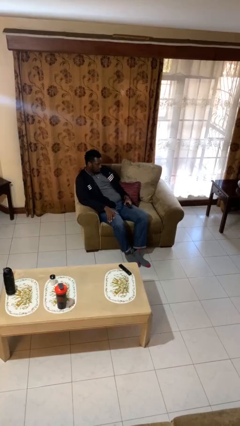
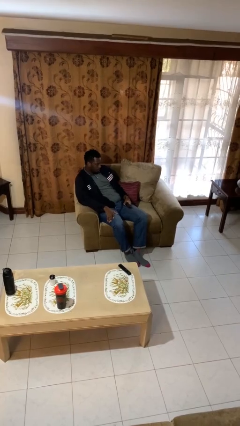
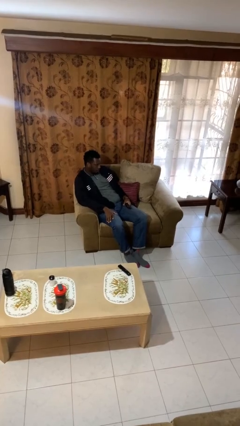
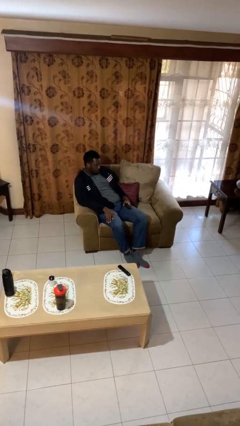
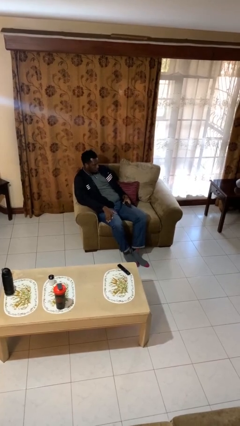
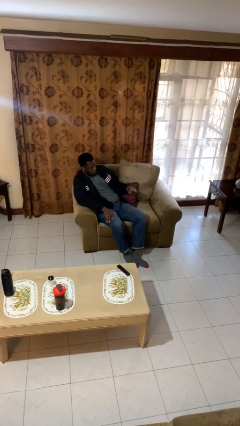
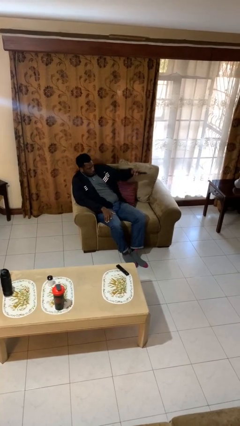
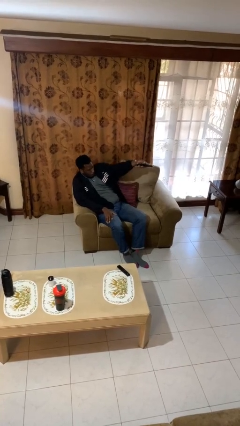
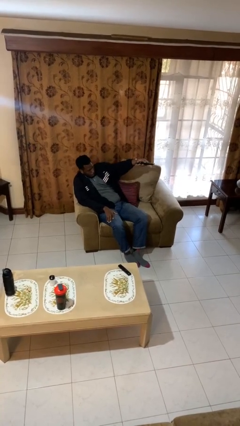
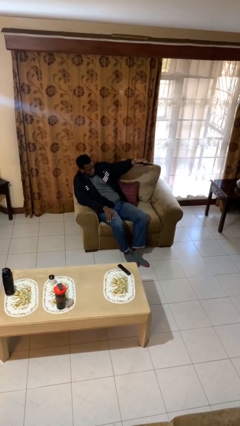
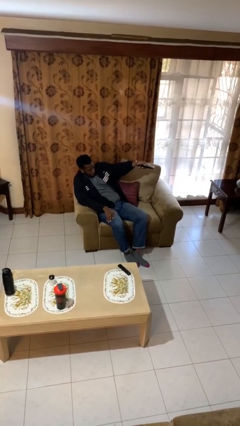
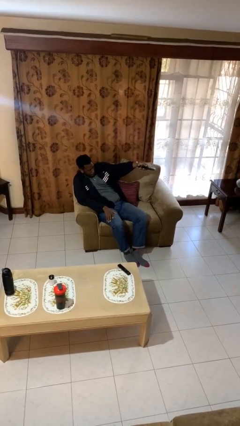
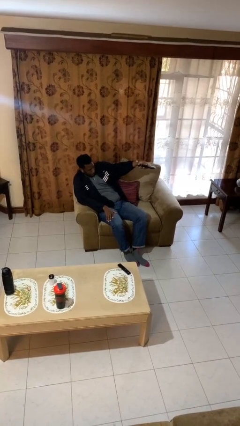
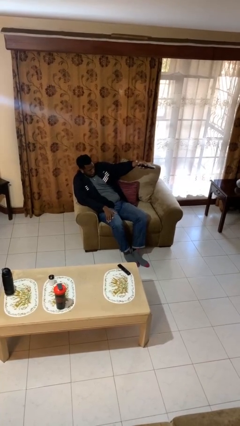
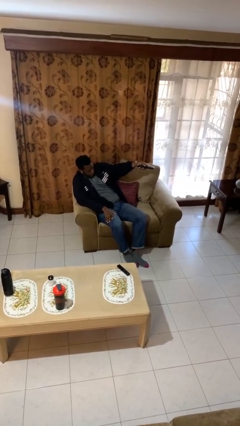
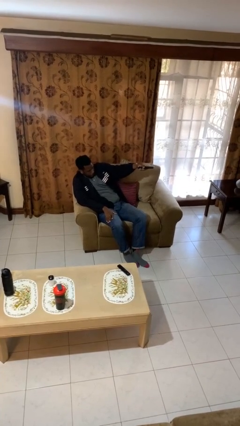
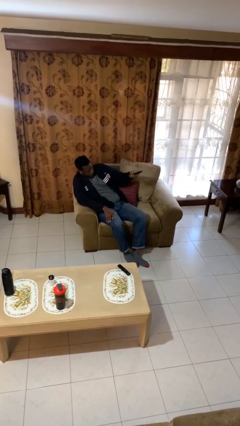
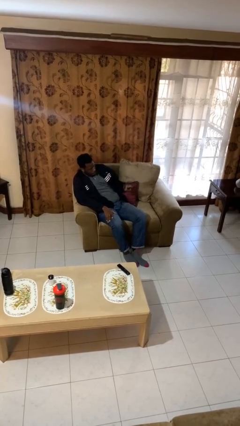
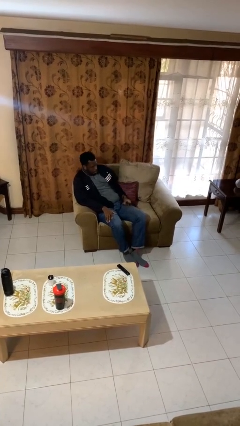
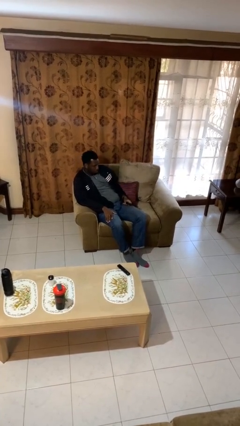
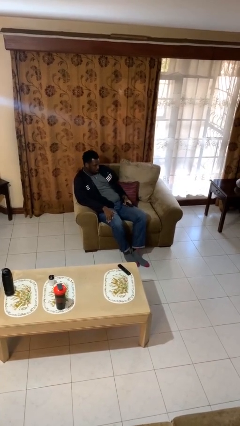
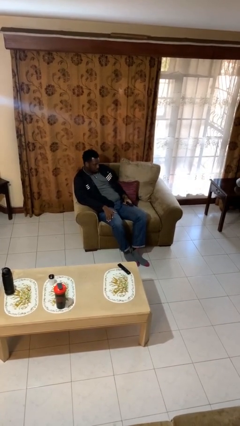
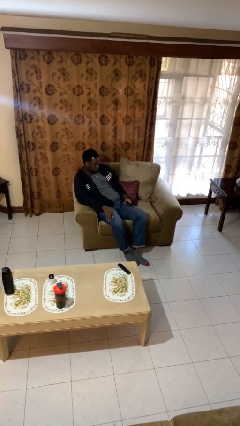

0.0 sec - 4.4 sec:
person uses television remote

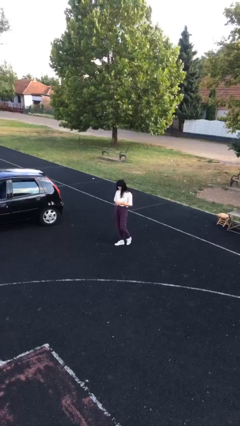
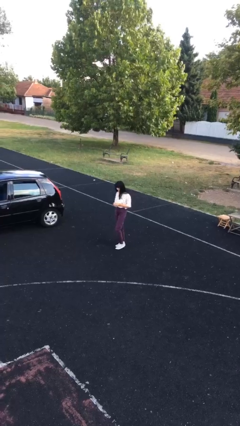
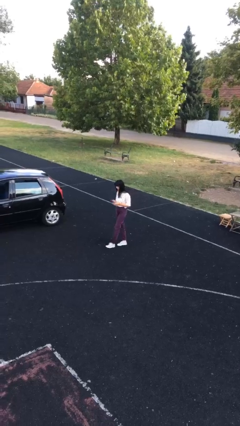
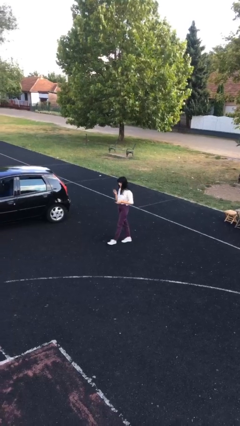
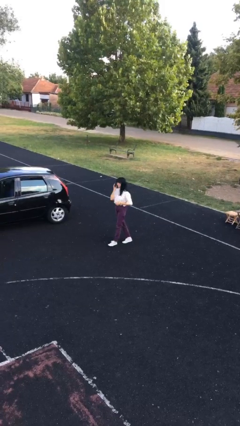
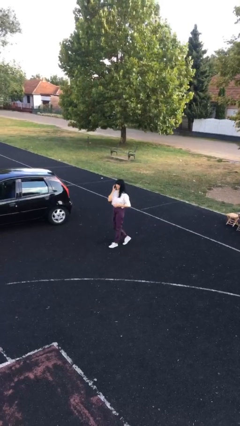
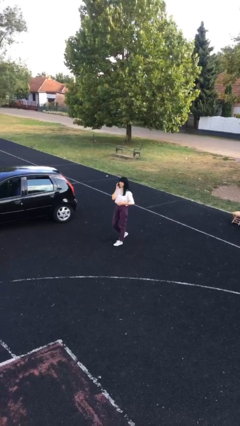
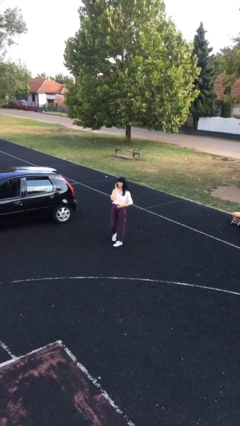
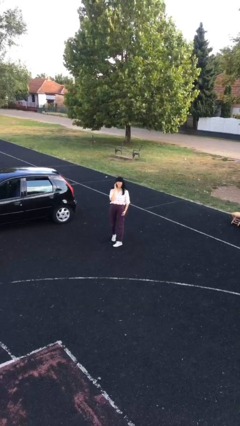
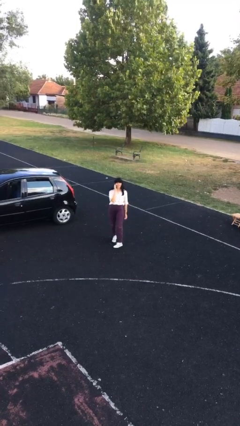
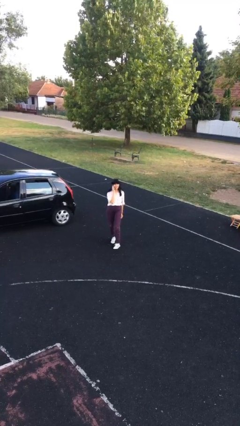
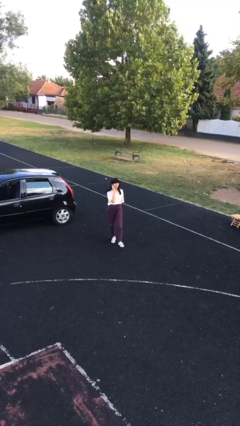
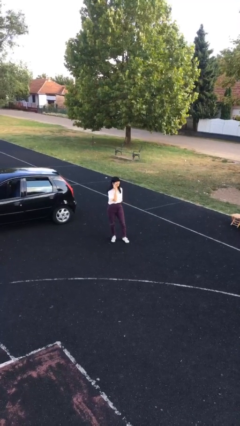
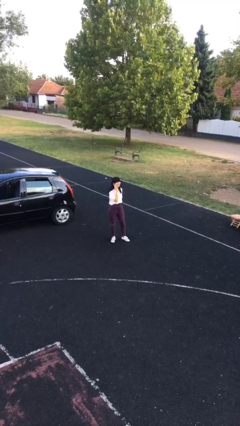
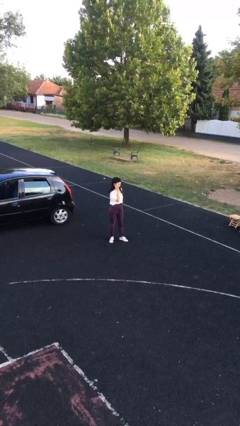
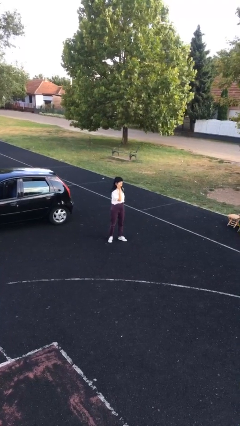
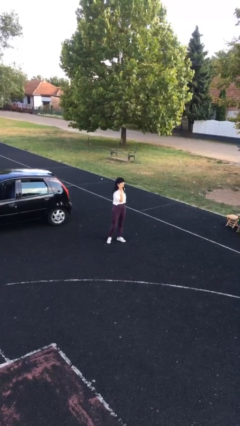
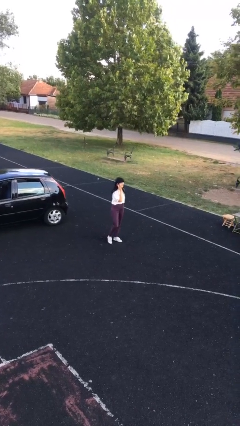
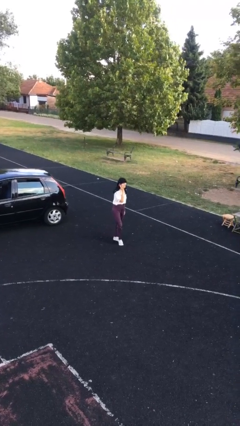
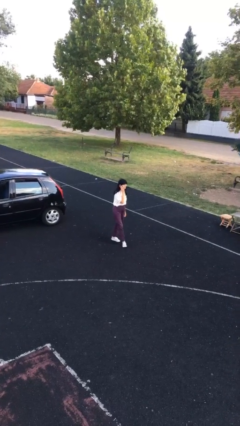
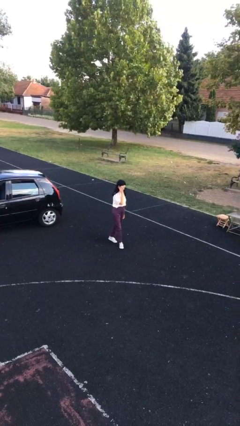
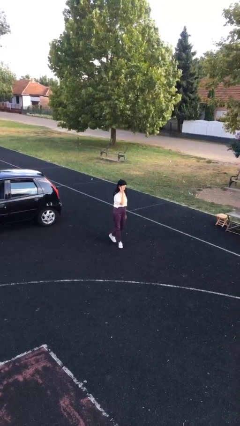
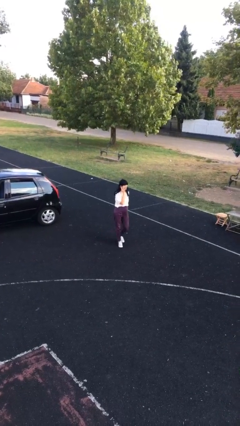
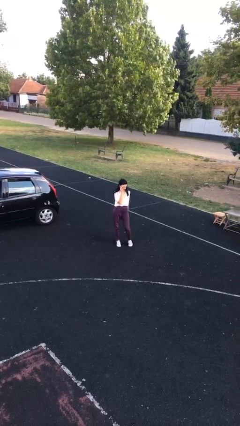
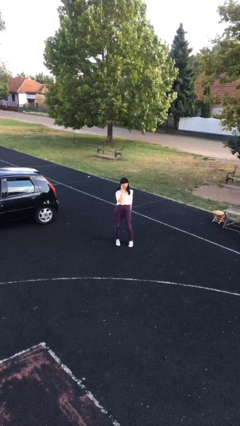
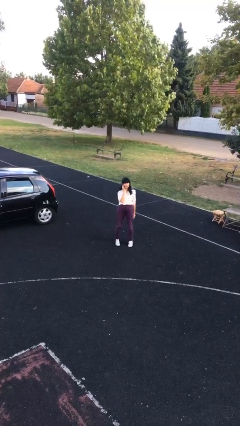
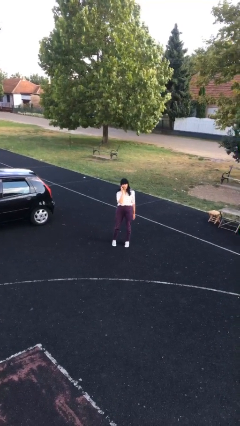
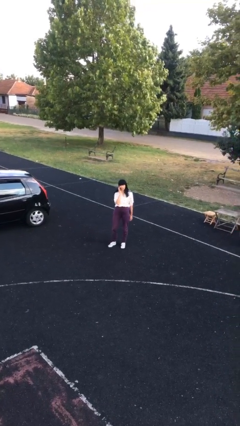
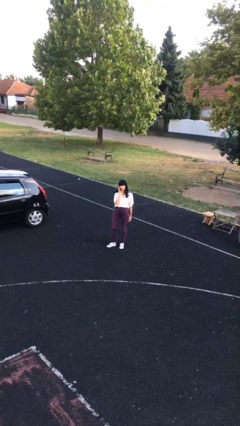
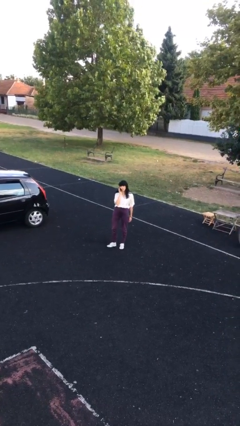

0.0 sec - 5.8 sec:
person talks on phone

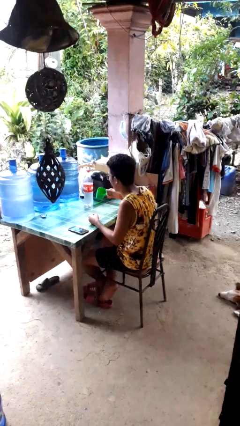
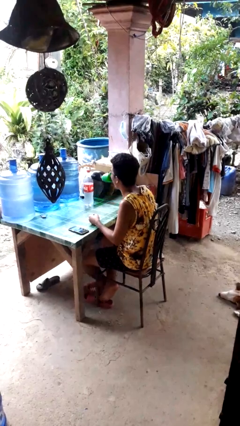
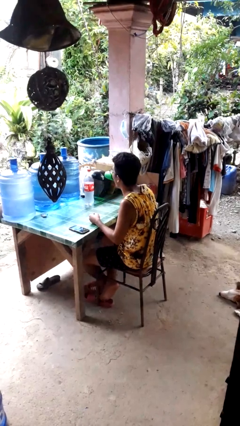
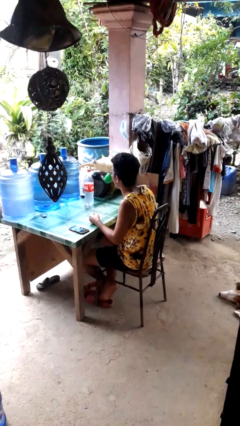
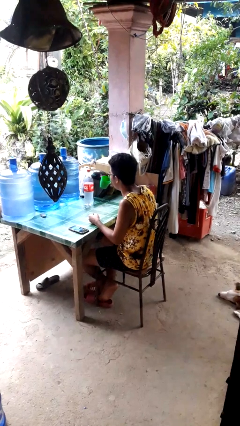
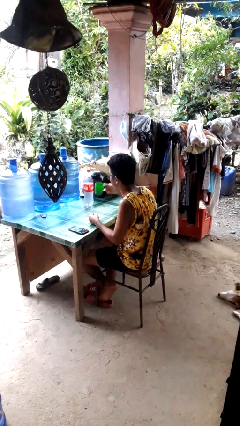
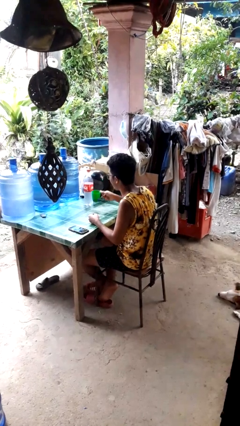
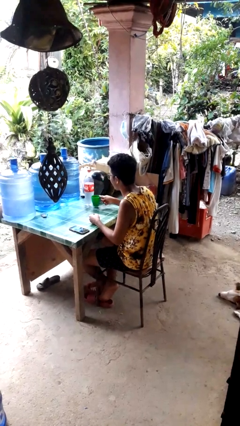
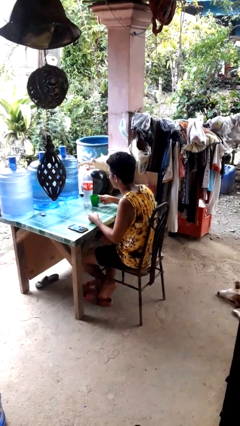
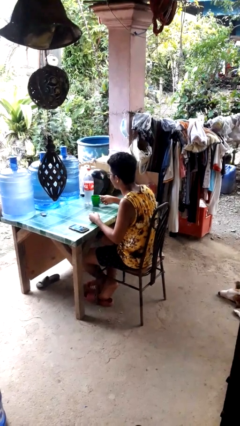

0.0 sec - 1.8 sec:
person drinks from cup

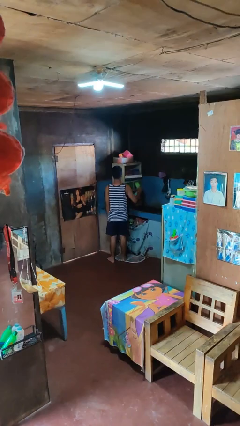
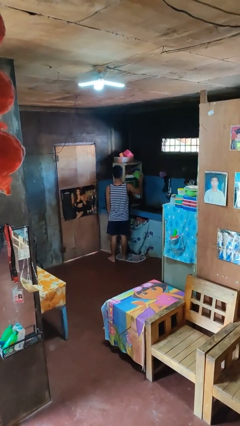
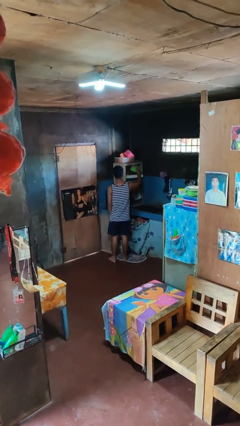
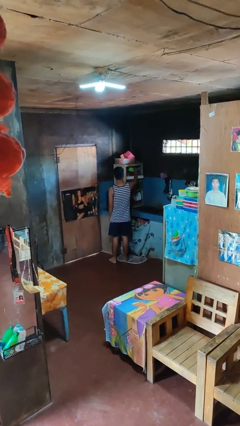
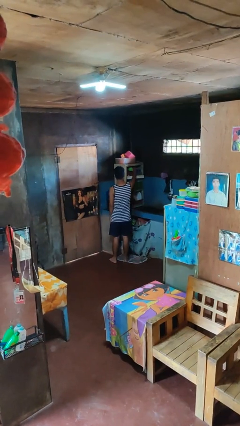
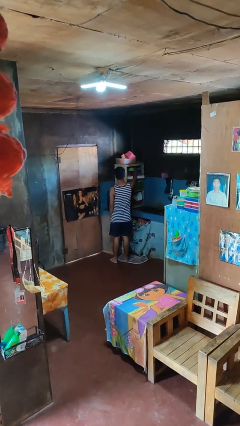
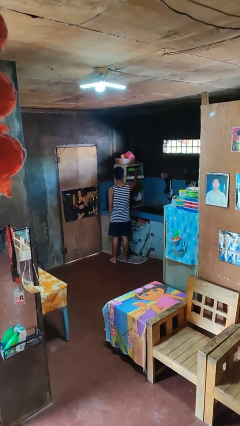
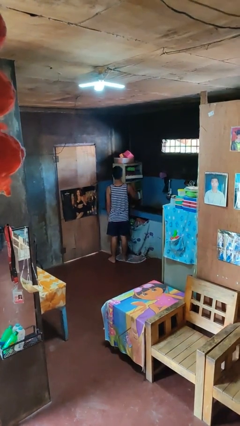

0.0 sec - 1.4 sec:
person puts object in cabinet

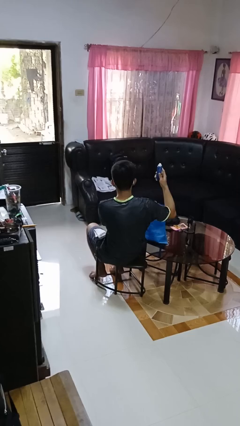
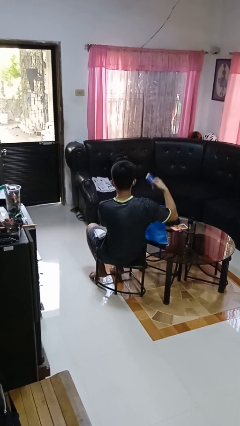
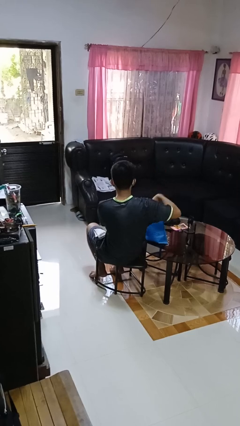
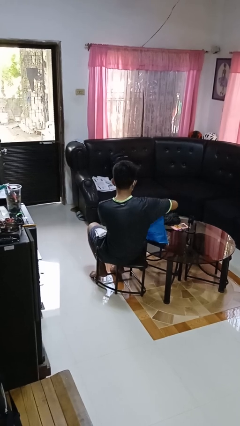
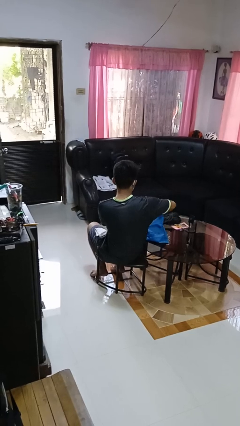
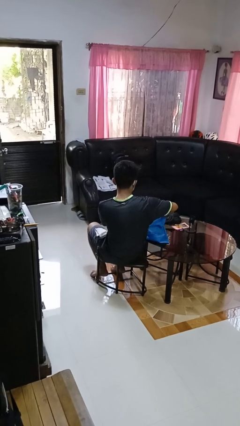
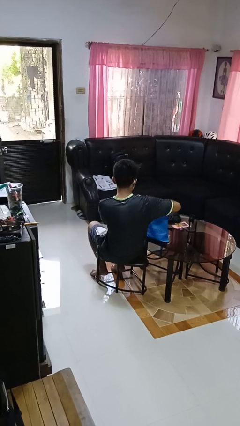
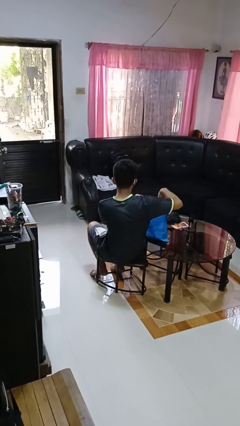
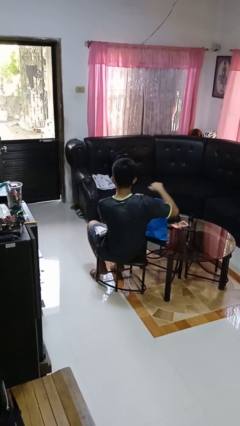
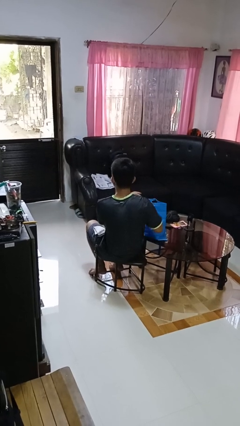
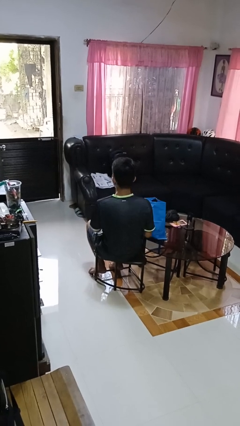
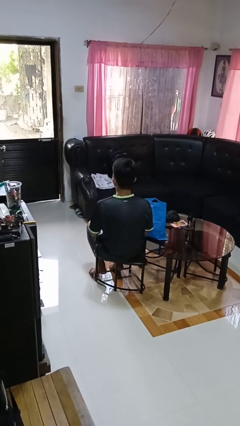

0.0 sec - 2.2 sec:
person puts object into bag

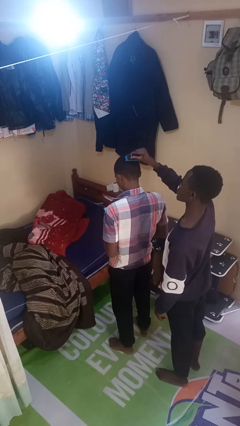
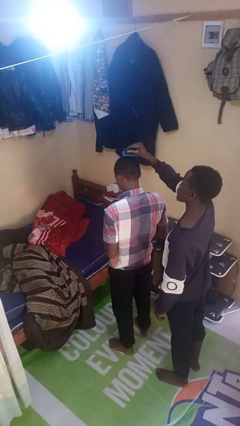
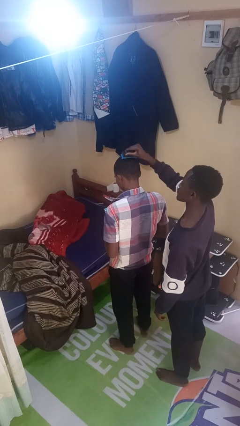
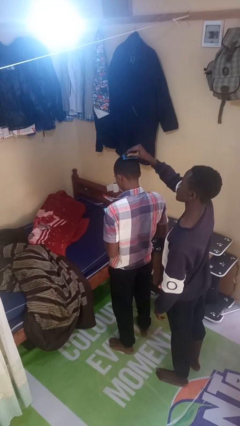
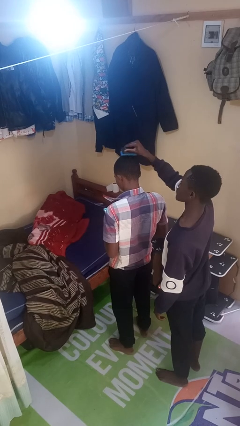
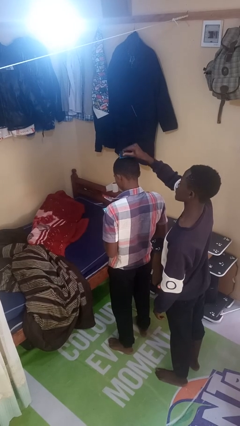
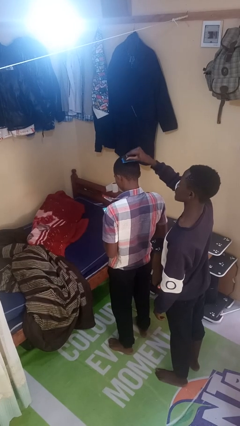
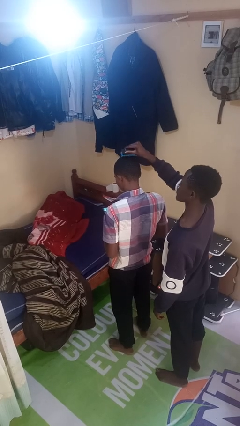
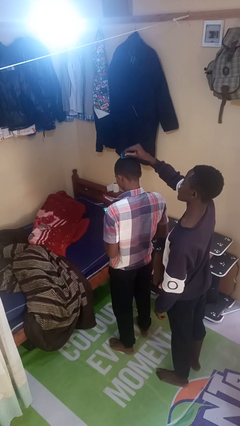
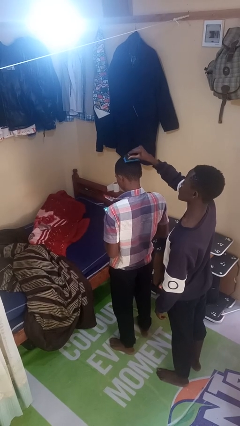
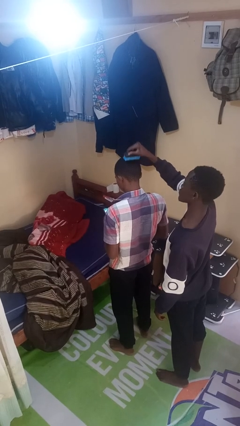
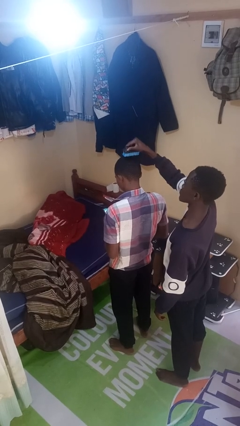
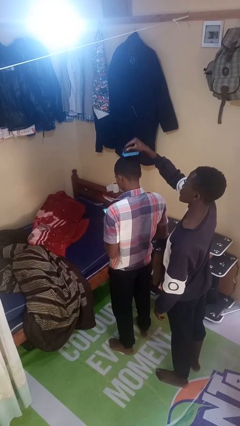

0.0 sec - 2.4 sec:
person brushes hair of person
